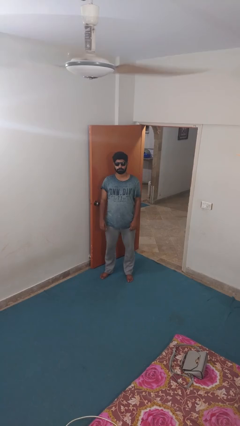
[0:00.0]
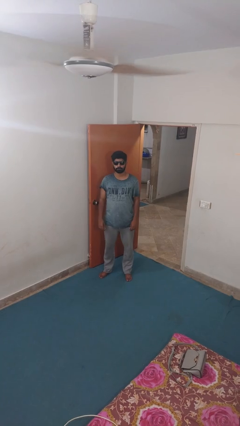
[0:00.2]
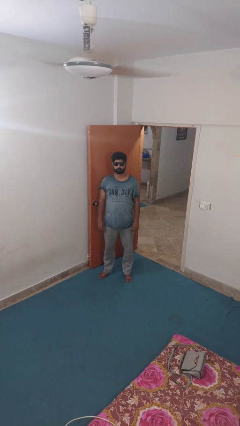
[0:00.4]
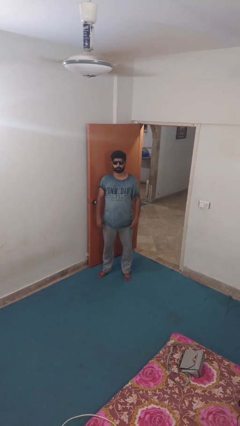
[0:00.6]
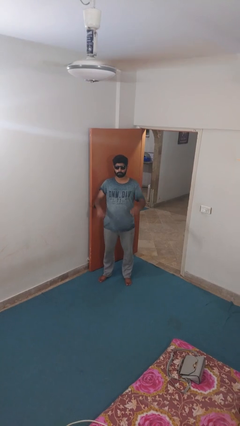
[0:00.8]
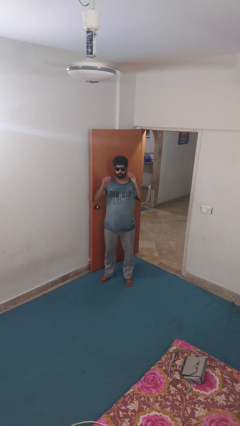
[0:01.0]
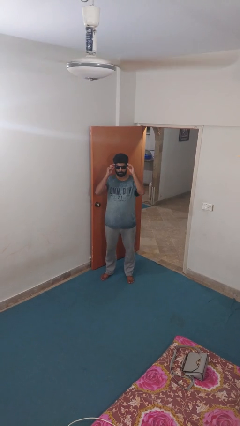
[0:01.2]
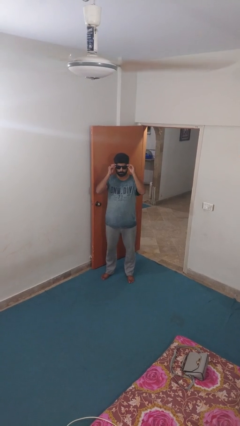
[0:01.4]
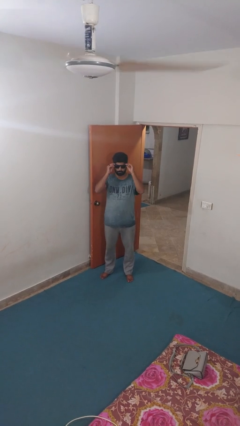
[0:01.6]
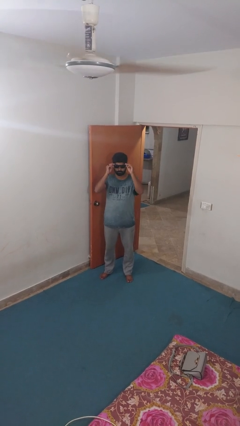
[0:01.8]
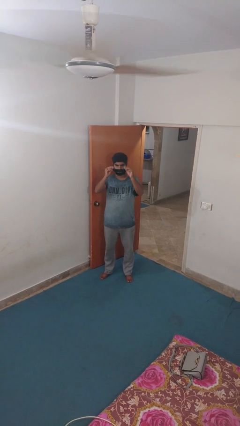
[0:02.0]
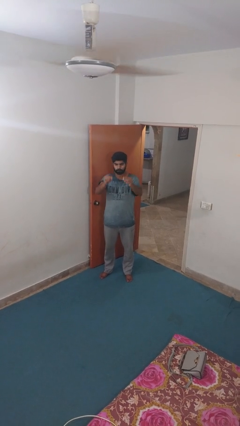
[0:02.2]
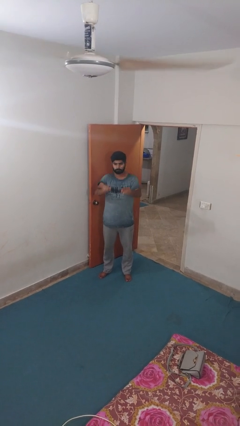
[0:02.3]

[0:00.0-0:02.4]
person takes off sunglasses

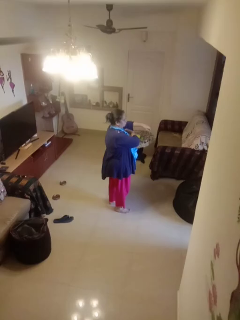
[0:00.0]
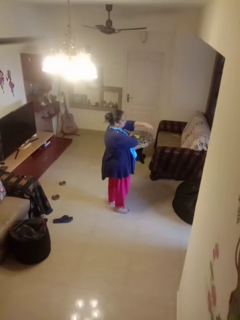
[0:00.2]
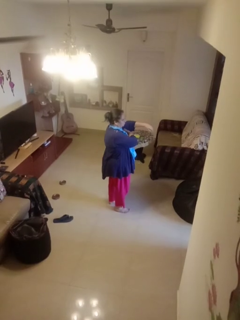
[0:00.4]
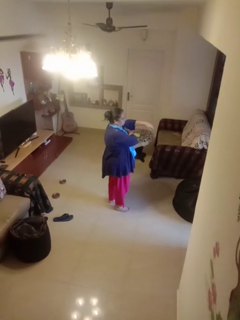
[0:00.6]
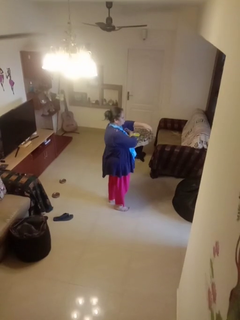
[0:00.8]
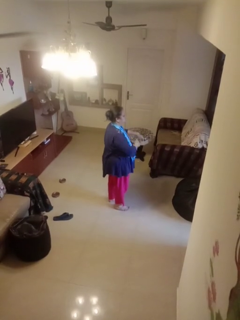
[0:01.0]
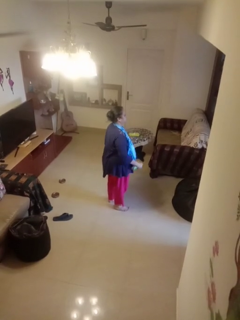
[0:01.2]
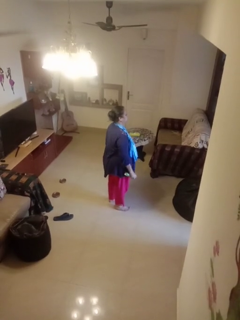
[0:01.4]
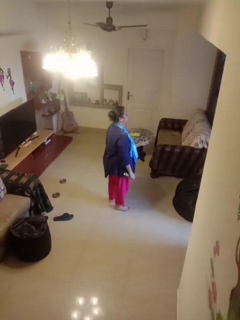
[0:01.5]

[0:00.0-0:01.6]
person applies deodorant

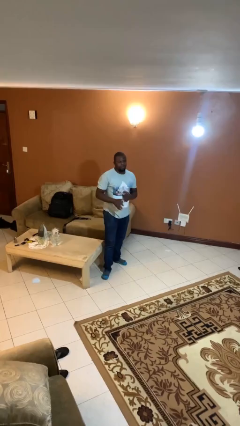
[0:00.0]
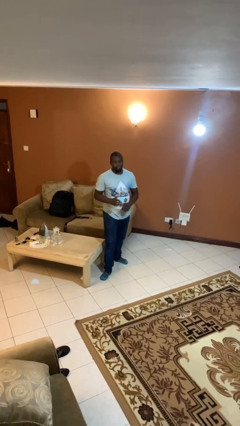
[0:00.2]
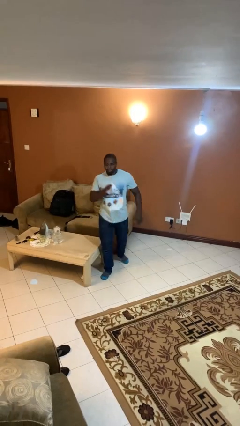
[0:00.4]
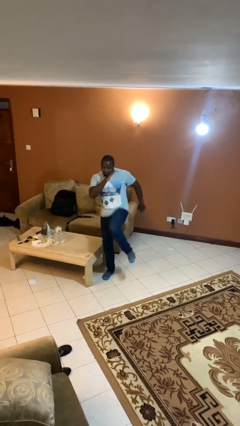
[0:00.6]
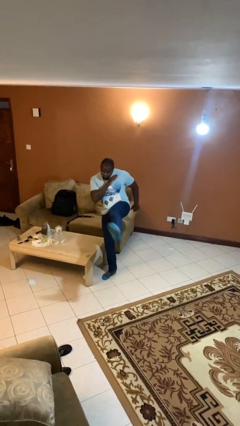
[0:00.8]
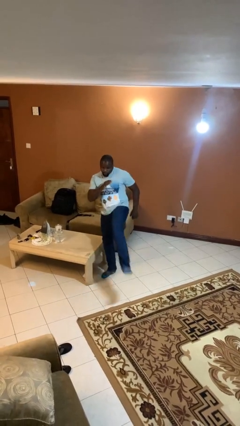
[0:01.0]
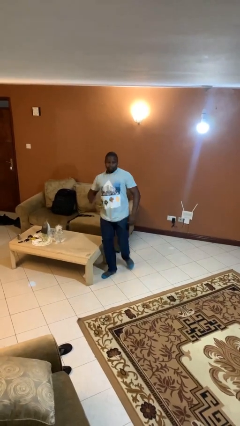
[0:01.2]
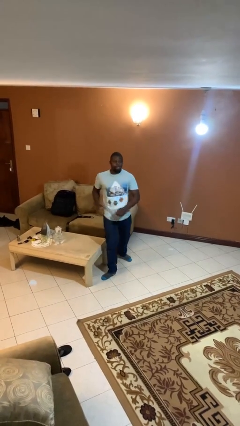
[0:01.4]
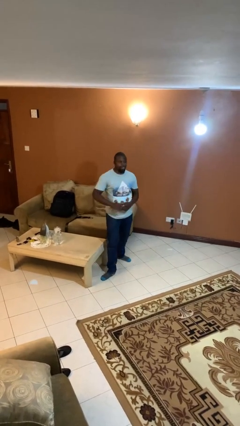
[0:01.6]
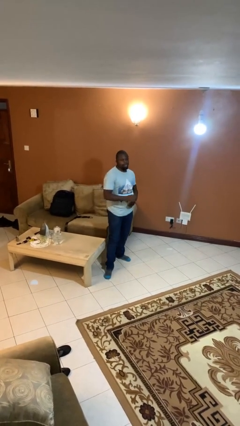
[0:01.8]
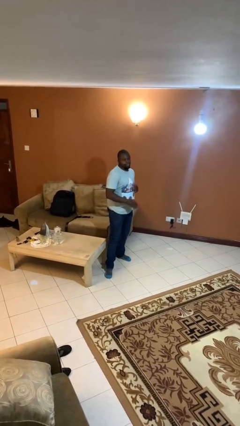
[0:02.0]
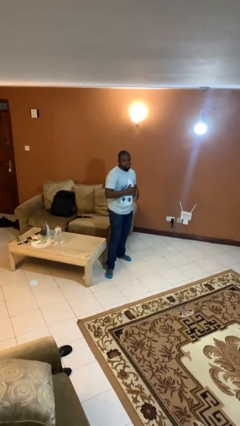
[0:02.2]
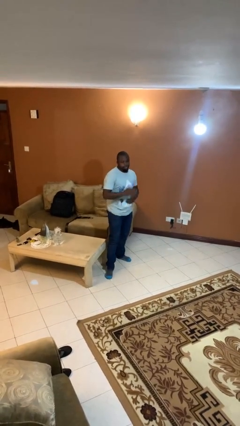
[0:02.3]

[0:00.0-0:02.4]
person karate kicks

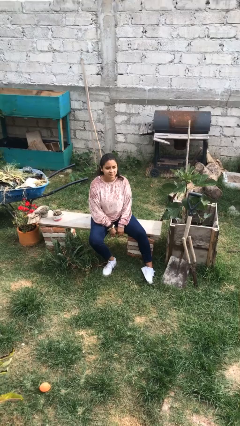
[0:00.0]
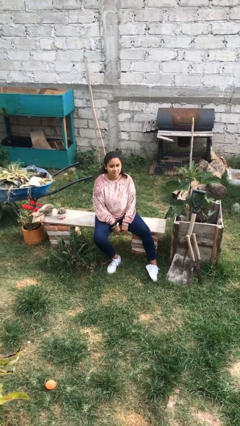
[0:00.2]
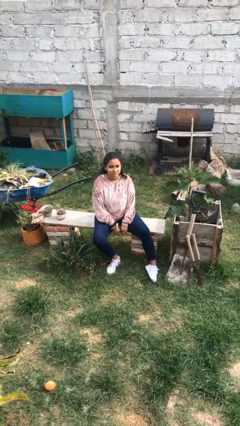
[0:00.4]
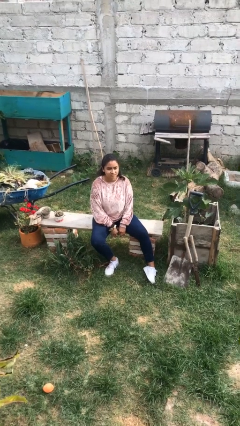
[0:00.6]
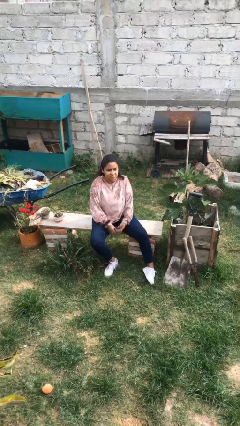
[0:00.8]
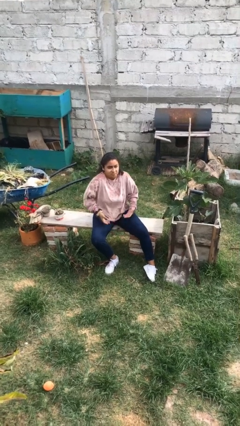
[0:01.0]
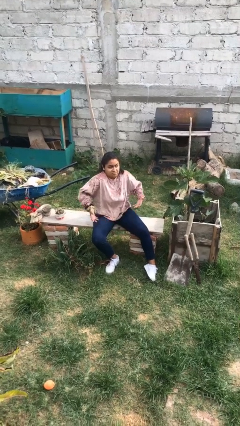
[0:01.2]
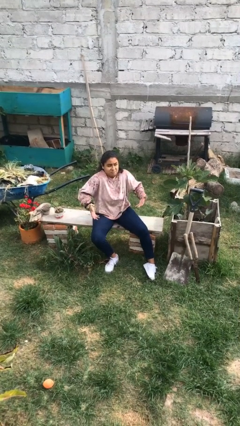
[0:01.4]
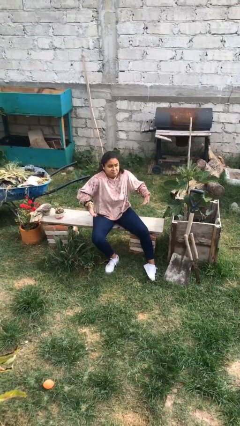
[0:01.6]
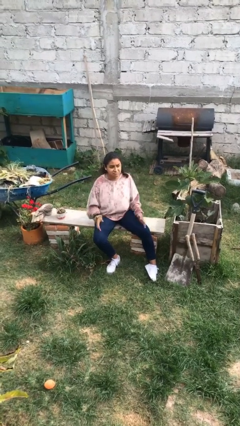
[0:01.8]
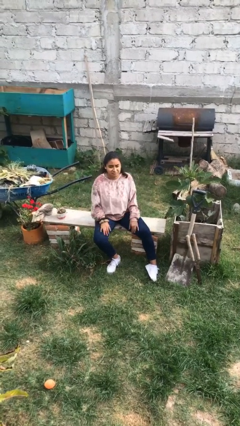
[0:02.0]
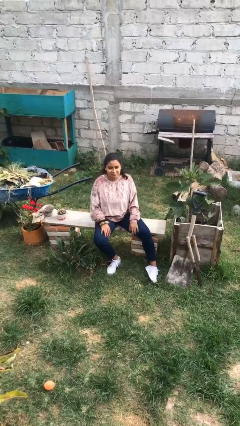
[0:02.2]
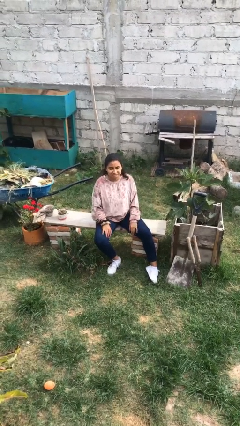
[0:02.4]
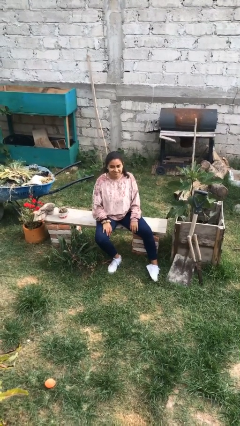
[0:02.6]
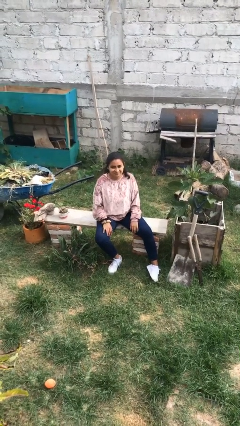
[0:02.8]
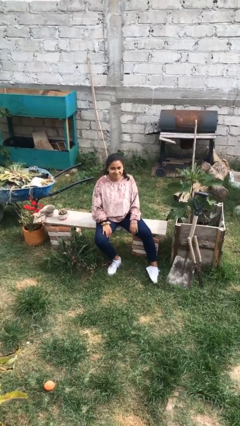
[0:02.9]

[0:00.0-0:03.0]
person shrugs

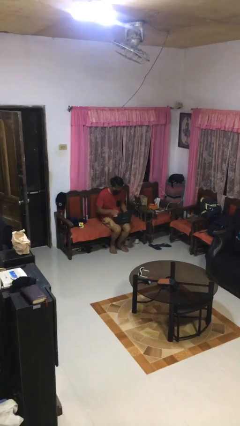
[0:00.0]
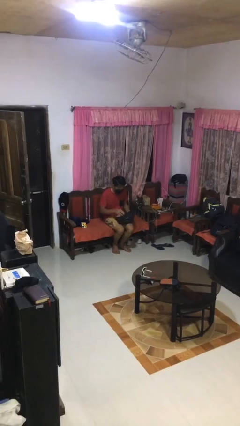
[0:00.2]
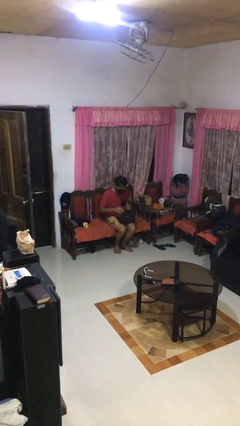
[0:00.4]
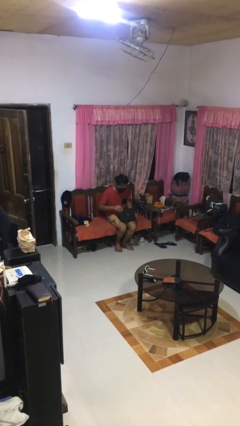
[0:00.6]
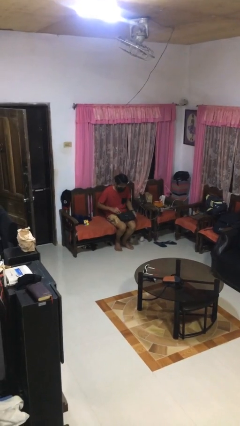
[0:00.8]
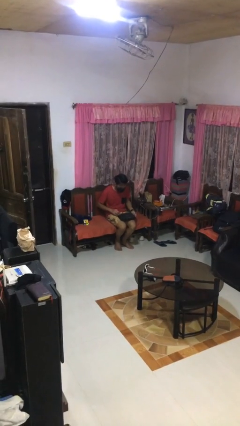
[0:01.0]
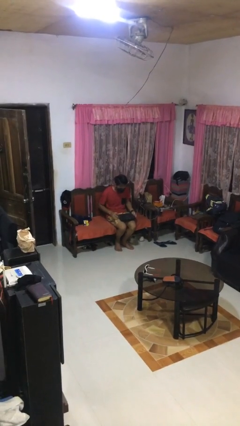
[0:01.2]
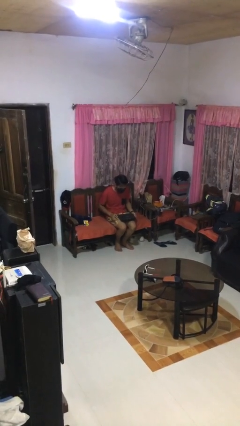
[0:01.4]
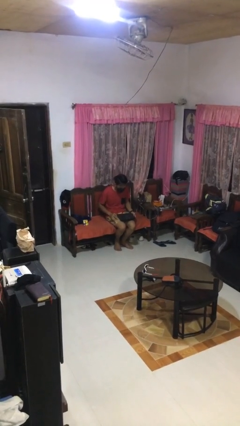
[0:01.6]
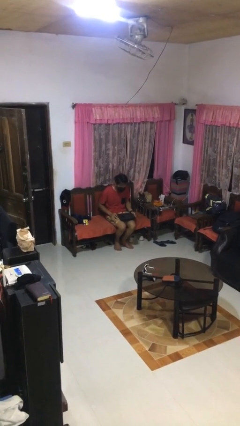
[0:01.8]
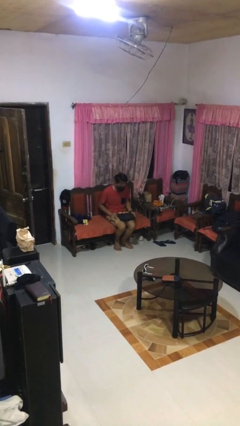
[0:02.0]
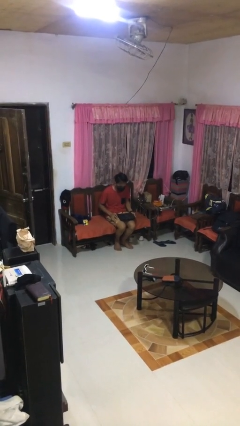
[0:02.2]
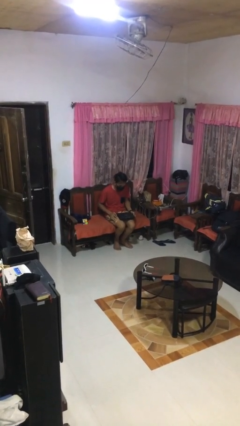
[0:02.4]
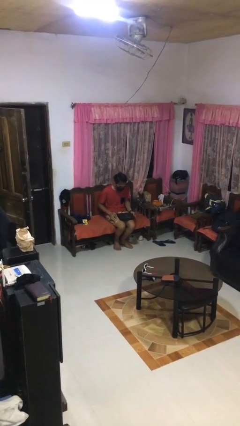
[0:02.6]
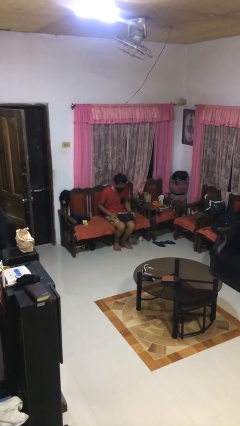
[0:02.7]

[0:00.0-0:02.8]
person closes laptop

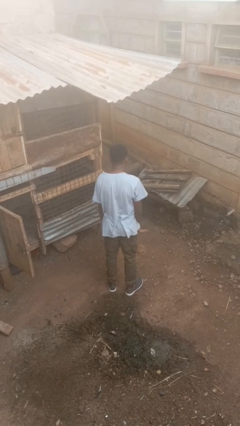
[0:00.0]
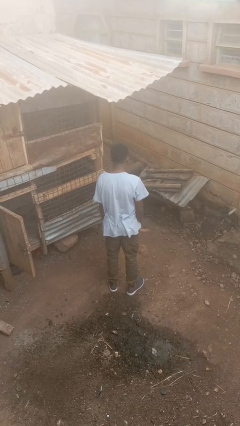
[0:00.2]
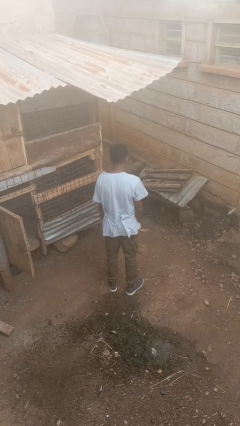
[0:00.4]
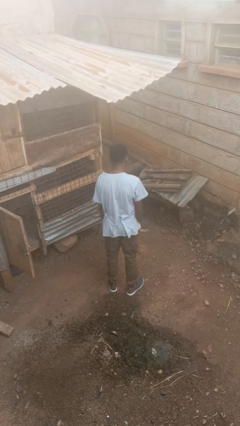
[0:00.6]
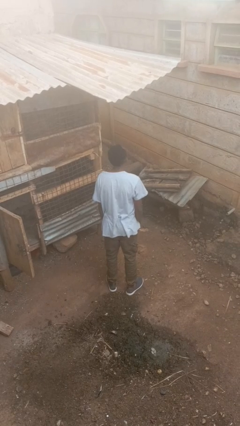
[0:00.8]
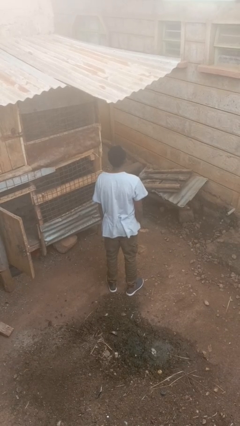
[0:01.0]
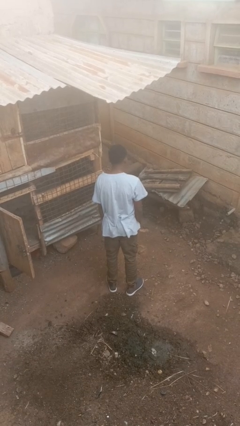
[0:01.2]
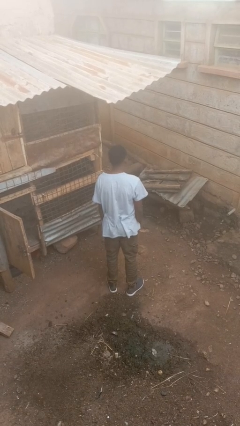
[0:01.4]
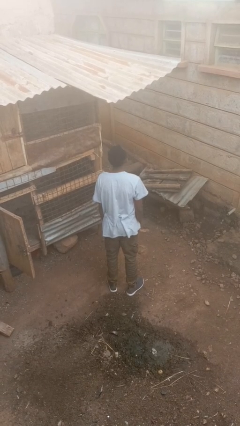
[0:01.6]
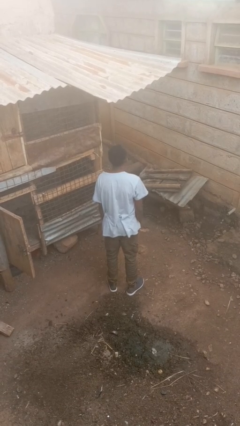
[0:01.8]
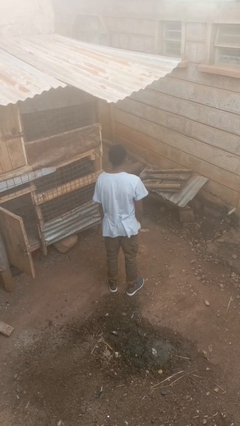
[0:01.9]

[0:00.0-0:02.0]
person nods head

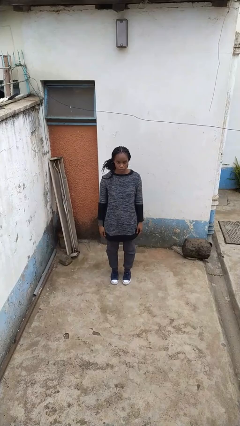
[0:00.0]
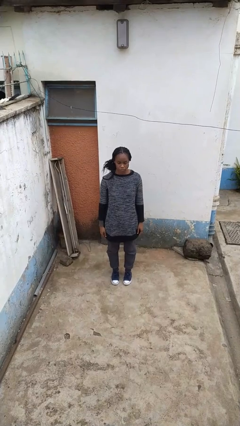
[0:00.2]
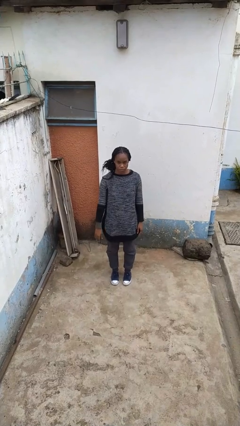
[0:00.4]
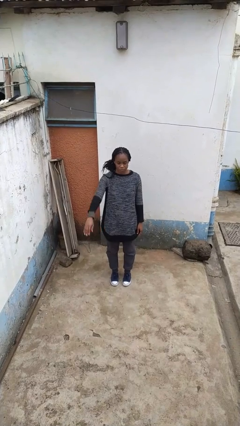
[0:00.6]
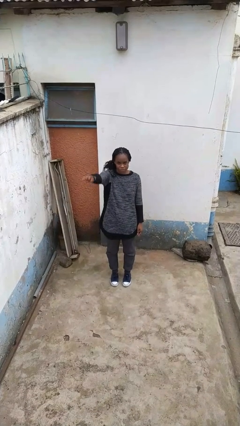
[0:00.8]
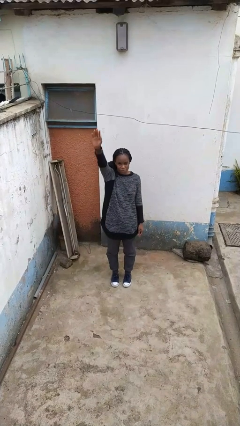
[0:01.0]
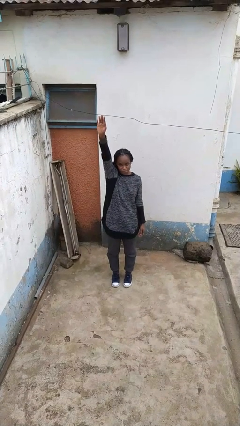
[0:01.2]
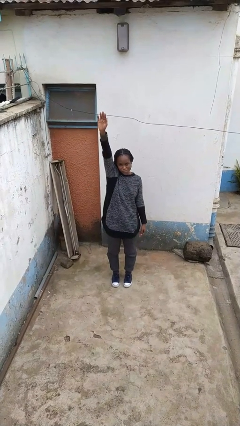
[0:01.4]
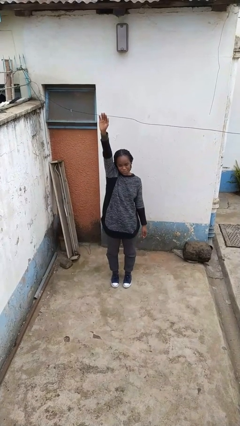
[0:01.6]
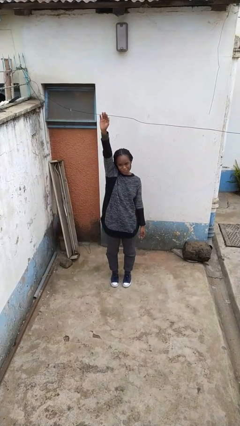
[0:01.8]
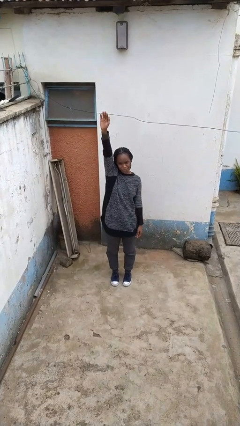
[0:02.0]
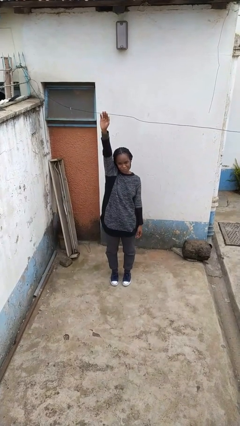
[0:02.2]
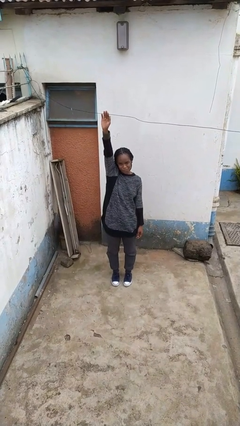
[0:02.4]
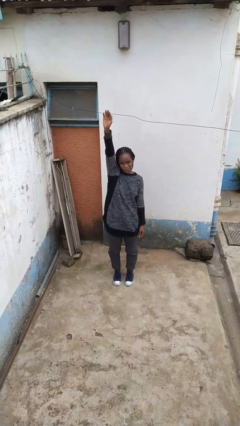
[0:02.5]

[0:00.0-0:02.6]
person gestures raise hand

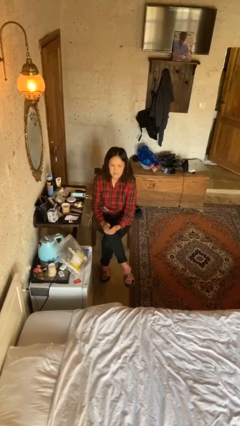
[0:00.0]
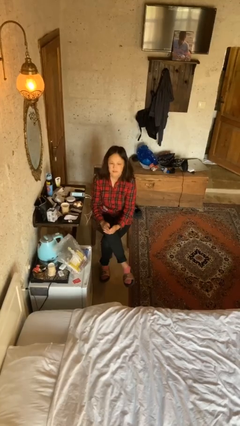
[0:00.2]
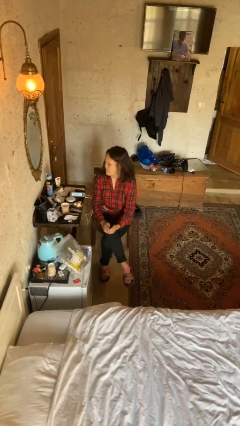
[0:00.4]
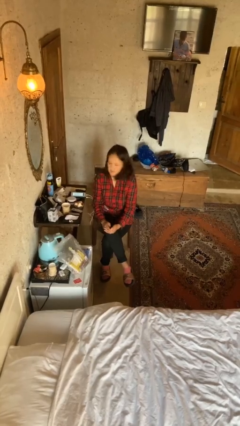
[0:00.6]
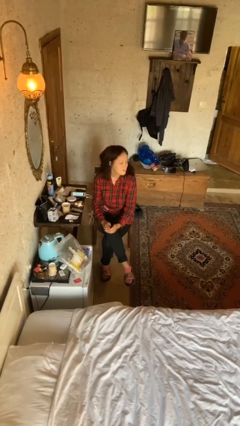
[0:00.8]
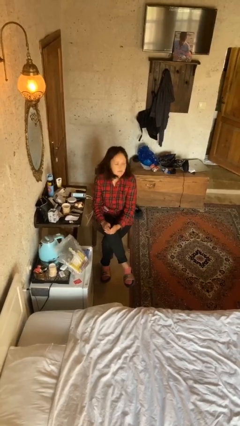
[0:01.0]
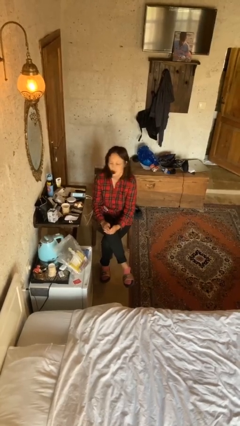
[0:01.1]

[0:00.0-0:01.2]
person shakes head
